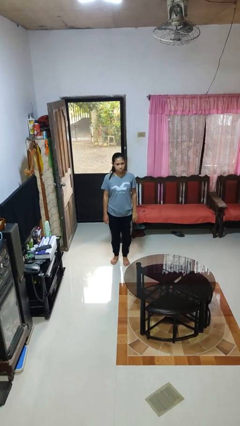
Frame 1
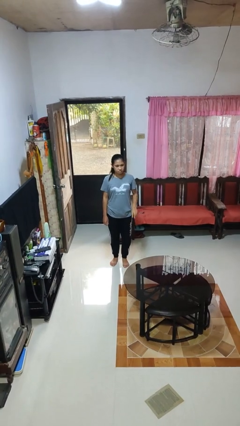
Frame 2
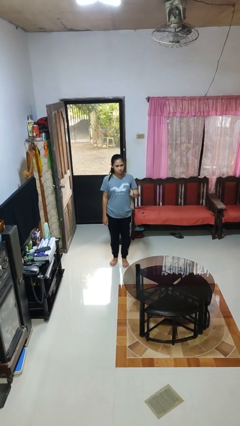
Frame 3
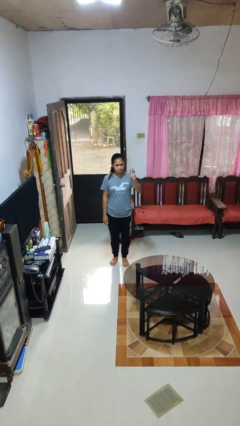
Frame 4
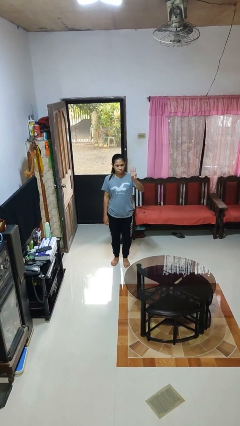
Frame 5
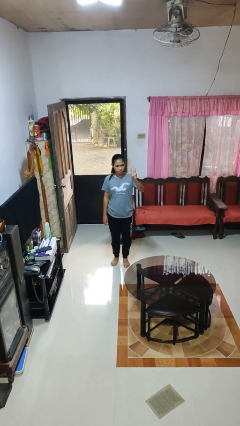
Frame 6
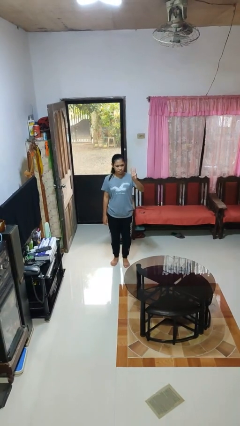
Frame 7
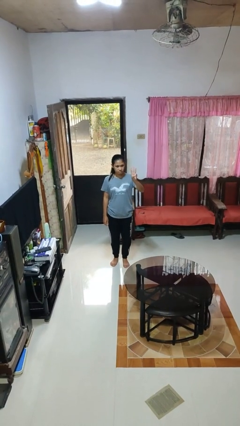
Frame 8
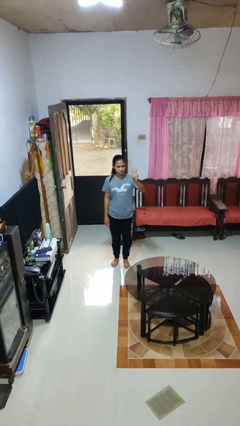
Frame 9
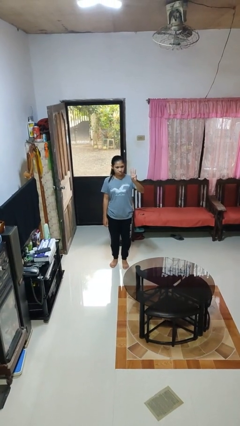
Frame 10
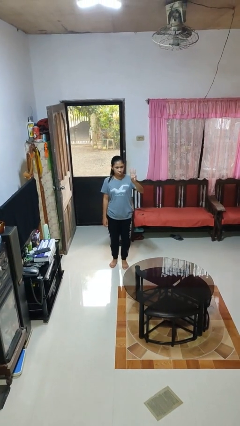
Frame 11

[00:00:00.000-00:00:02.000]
person gestures number three

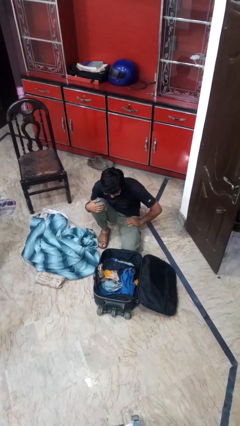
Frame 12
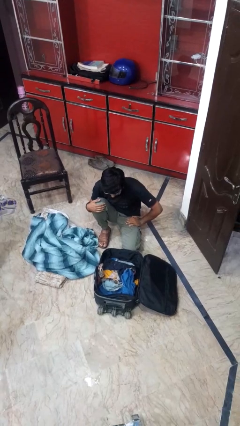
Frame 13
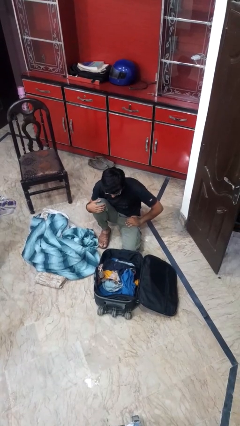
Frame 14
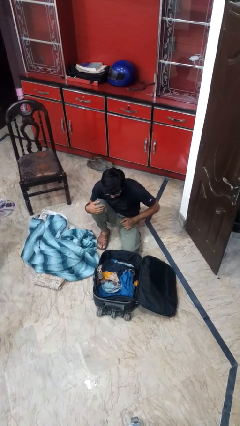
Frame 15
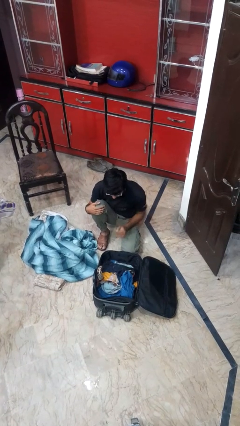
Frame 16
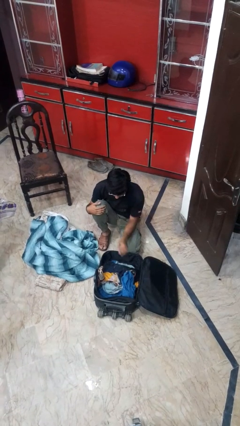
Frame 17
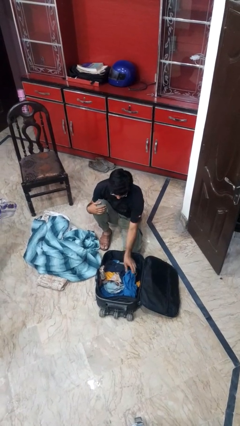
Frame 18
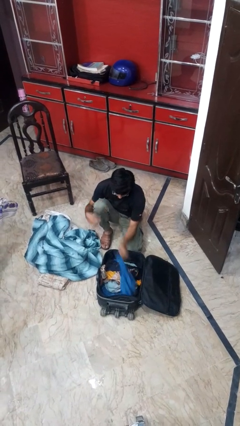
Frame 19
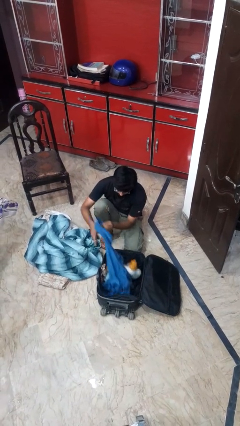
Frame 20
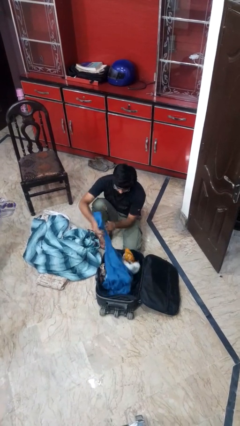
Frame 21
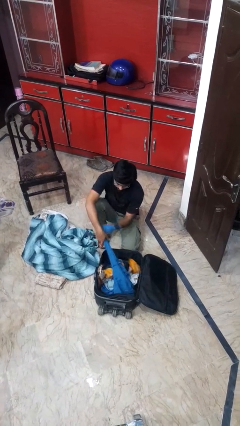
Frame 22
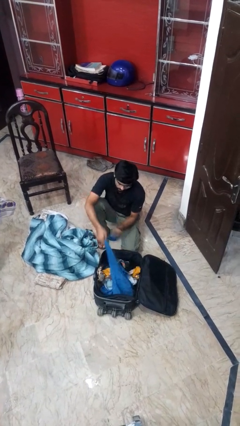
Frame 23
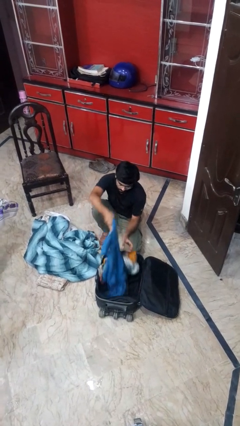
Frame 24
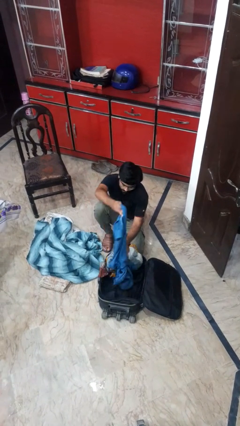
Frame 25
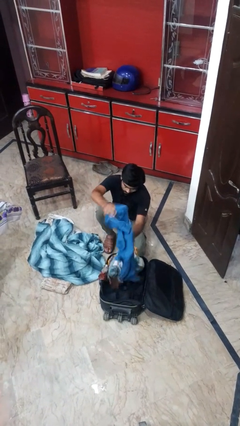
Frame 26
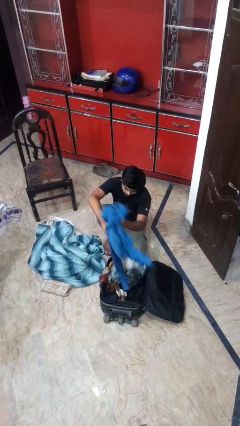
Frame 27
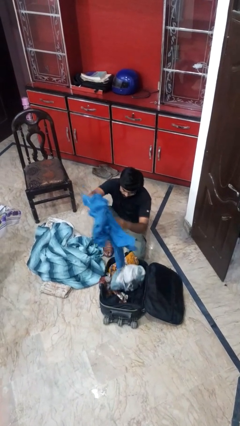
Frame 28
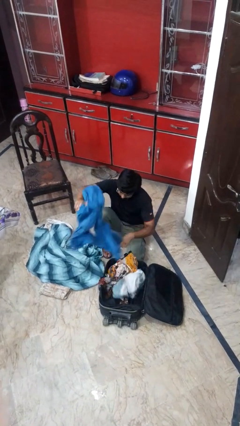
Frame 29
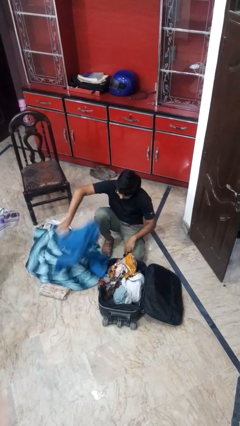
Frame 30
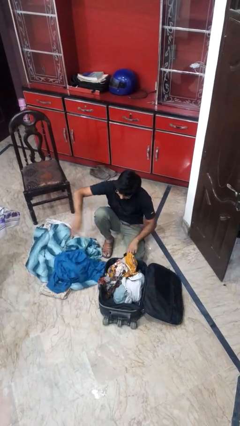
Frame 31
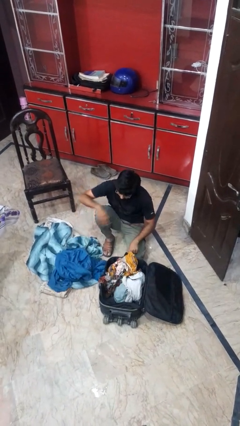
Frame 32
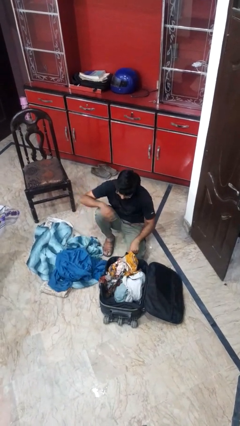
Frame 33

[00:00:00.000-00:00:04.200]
person unloads clothes from suitcase

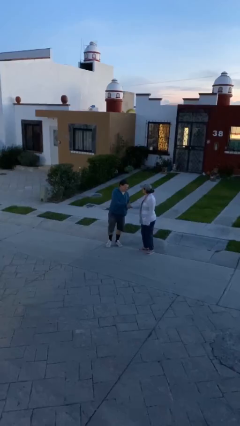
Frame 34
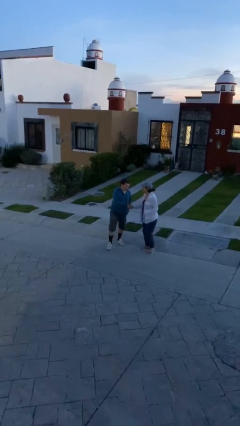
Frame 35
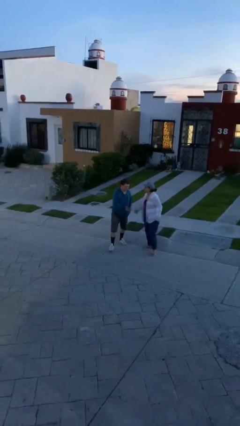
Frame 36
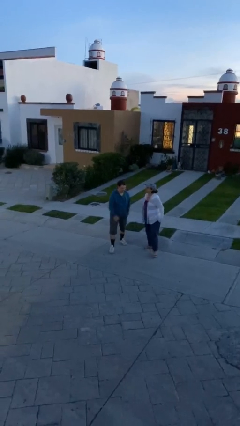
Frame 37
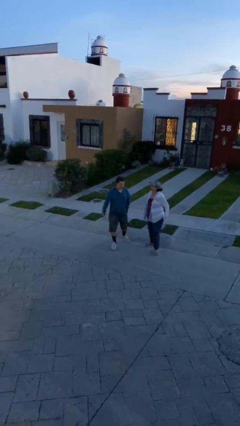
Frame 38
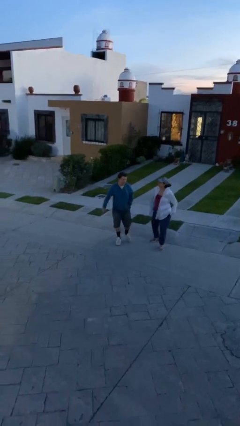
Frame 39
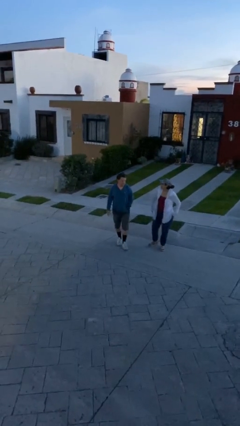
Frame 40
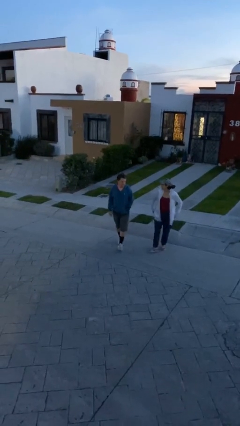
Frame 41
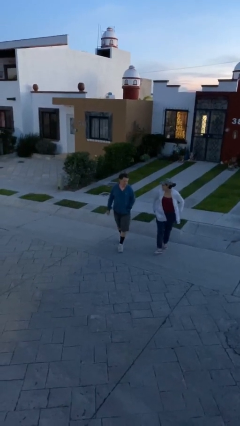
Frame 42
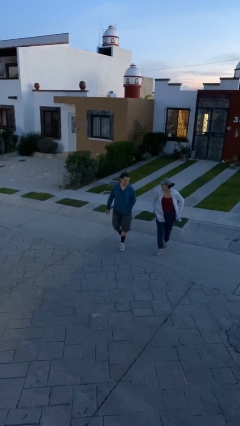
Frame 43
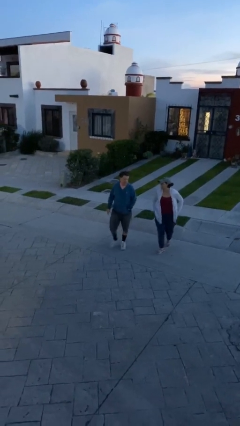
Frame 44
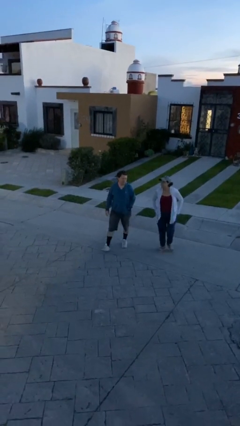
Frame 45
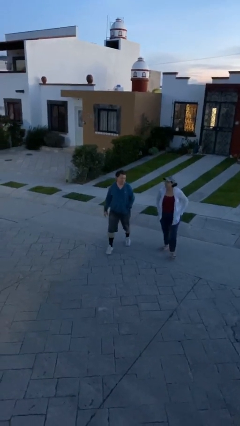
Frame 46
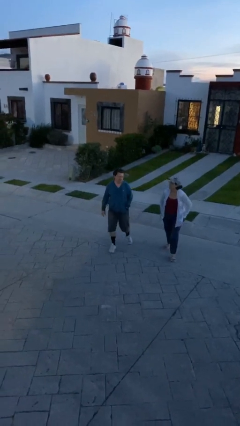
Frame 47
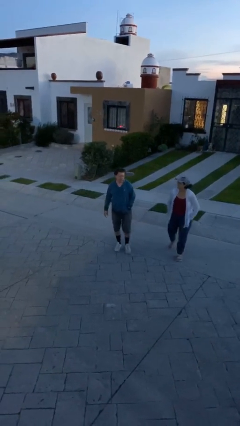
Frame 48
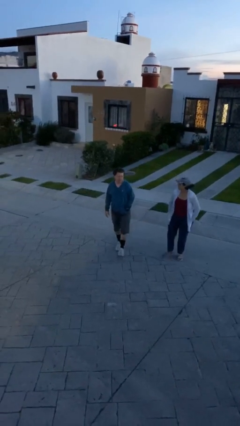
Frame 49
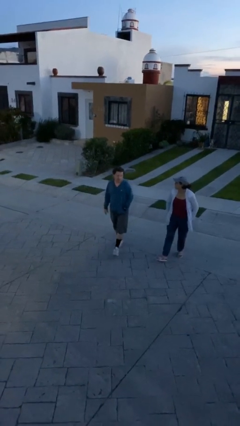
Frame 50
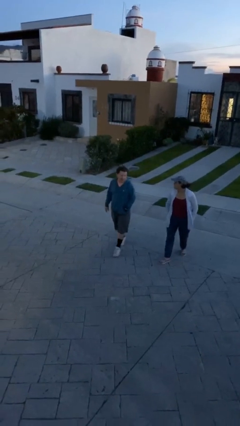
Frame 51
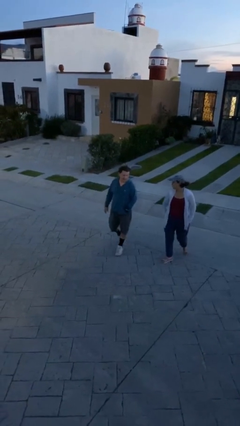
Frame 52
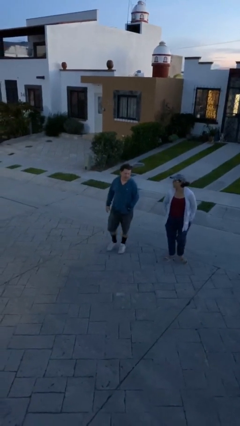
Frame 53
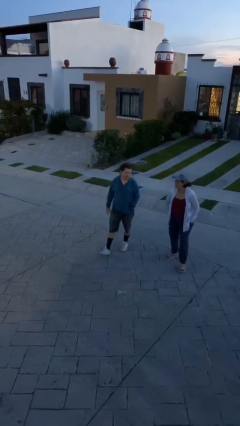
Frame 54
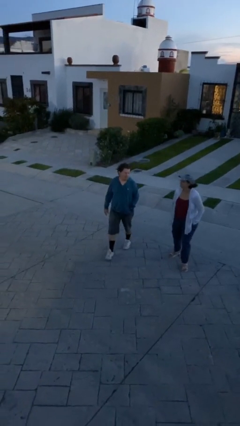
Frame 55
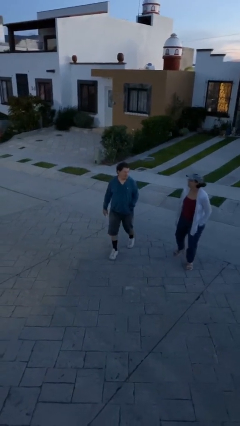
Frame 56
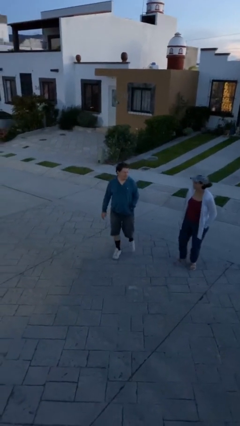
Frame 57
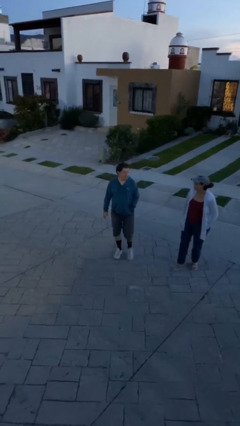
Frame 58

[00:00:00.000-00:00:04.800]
person talks to person

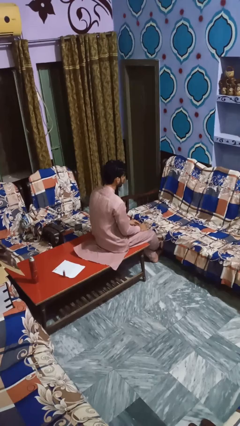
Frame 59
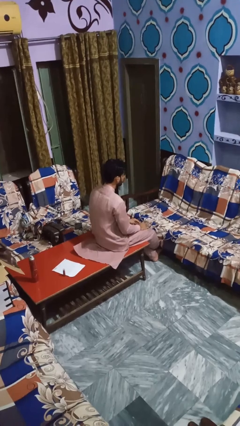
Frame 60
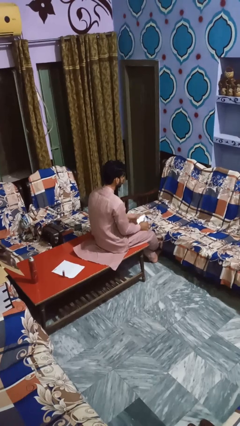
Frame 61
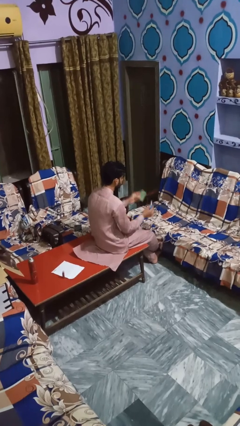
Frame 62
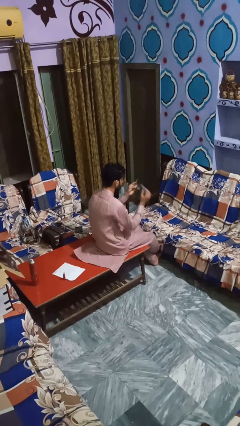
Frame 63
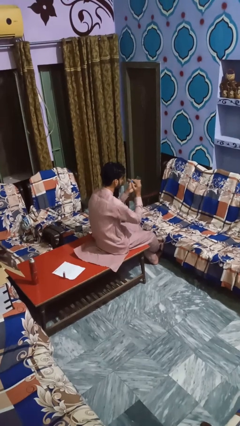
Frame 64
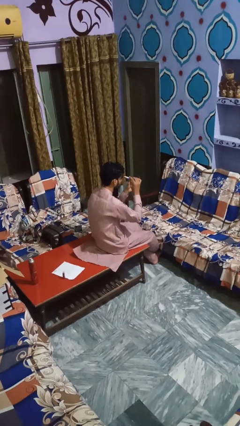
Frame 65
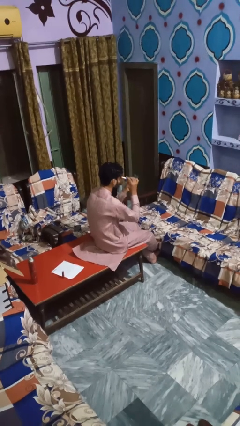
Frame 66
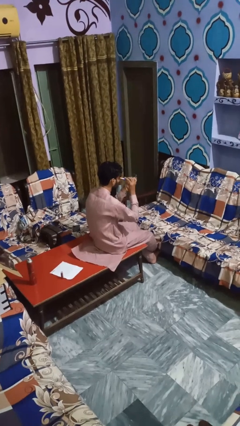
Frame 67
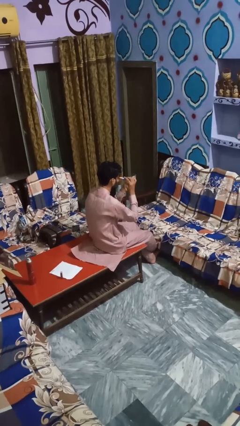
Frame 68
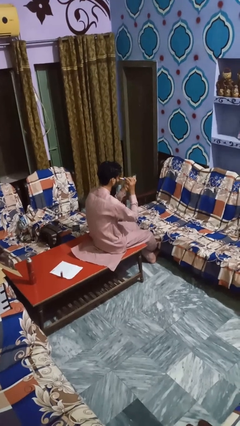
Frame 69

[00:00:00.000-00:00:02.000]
person applies eye makeup

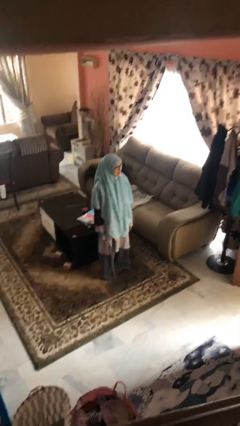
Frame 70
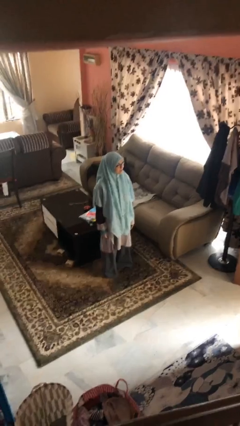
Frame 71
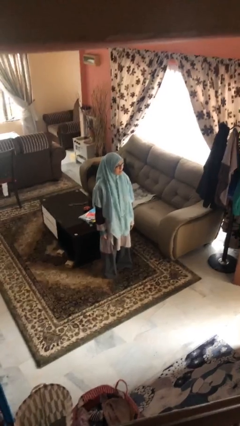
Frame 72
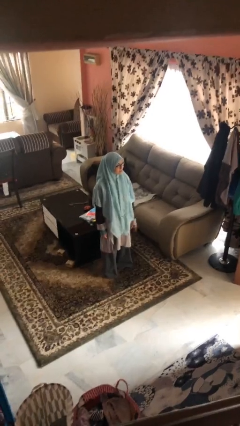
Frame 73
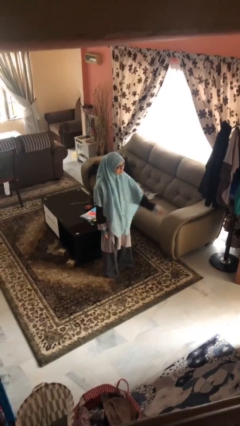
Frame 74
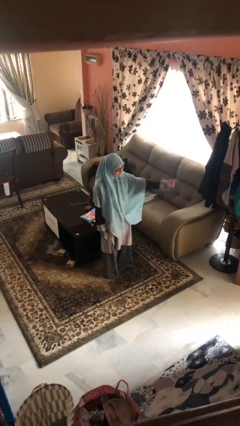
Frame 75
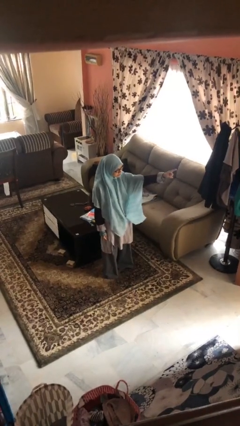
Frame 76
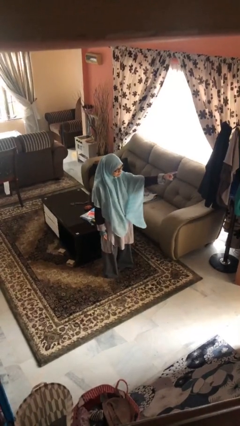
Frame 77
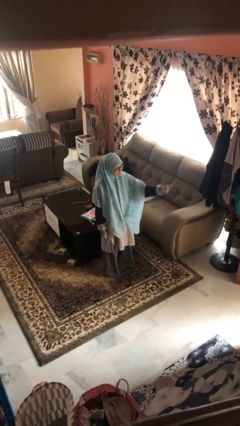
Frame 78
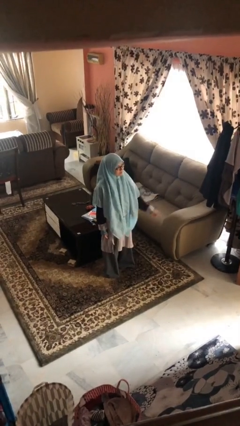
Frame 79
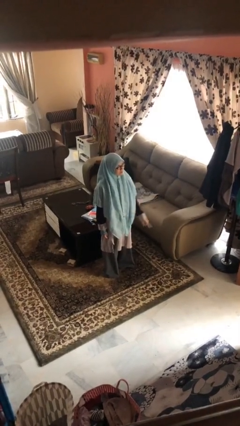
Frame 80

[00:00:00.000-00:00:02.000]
person points at person

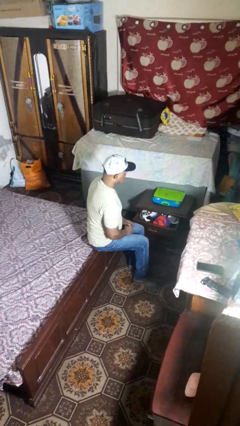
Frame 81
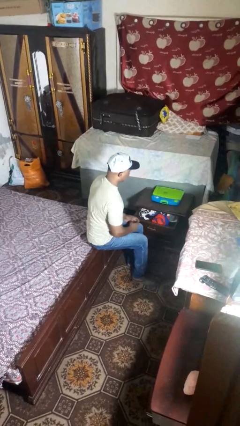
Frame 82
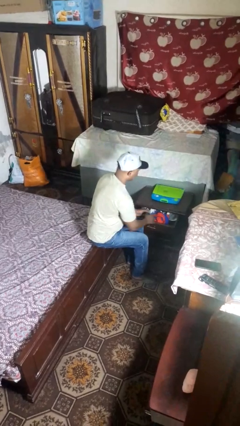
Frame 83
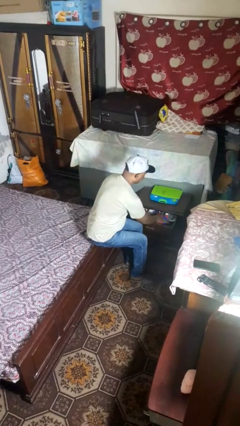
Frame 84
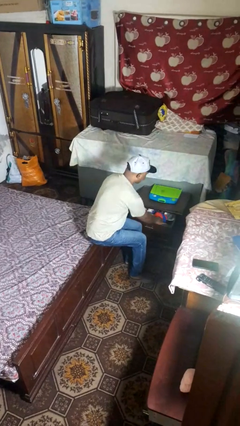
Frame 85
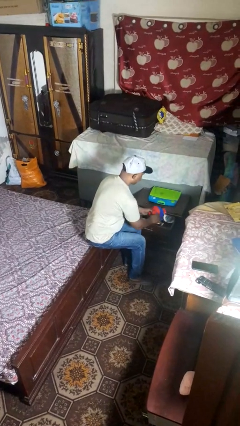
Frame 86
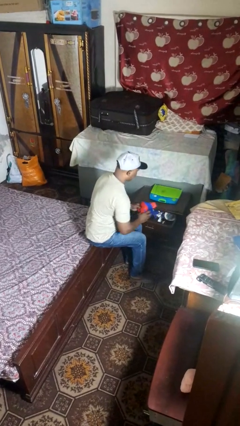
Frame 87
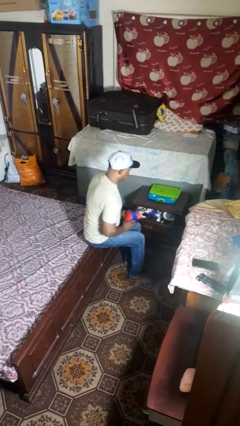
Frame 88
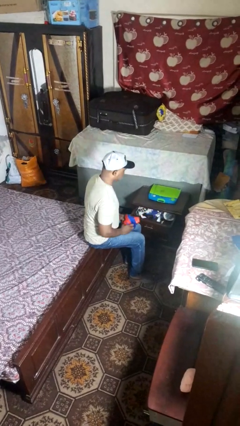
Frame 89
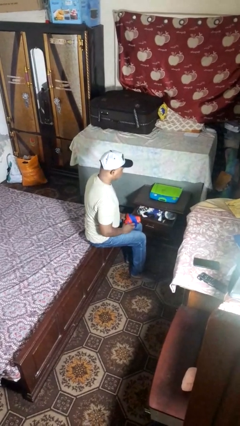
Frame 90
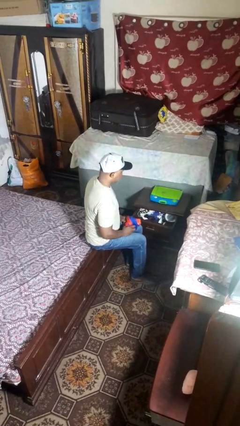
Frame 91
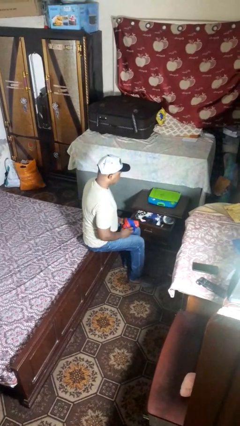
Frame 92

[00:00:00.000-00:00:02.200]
person takes clothes from dresser
